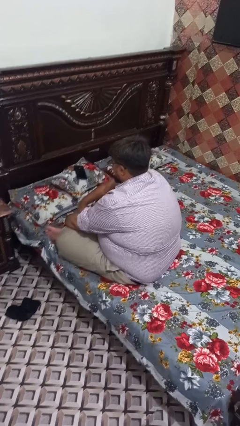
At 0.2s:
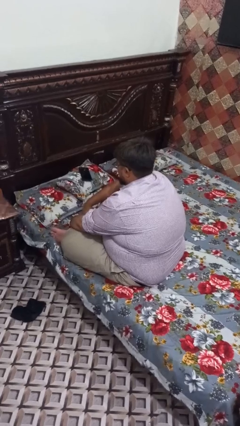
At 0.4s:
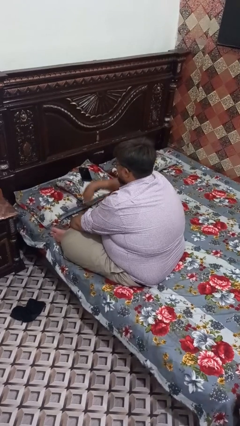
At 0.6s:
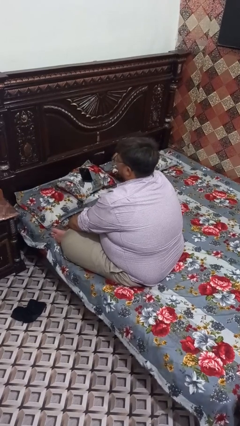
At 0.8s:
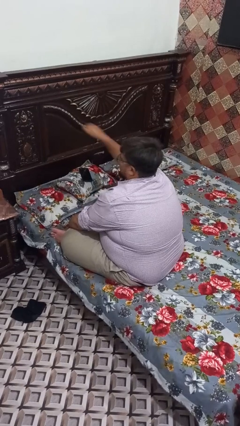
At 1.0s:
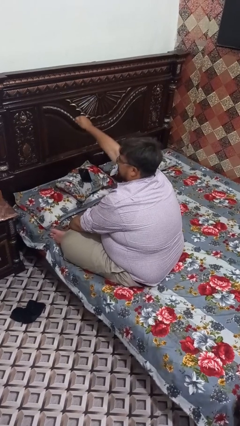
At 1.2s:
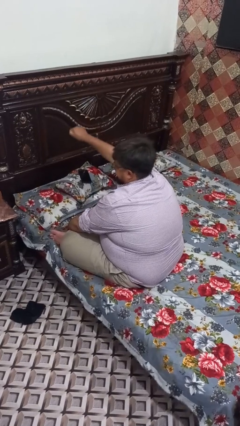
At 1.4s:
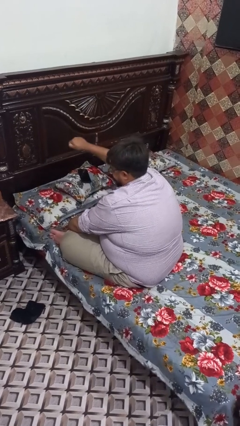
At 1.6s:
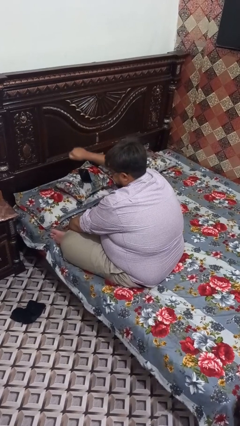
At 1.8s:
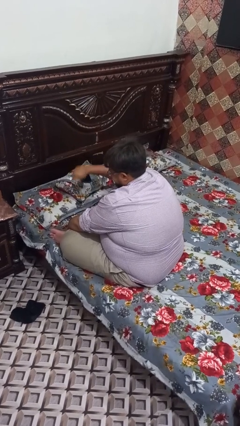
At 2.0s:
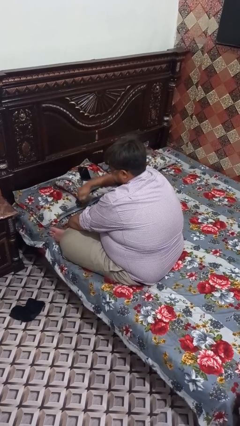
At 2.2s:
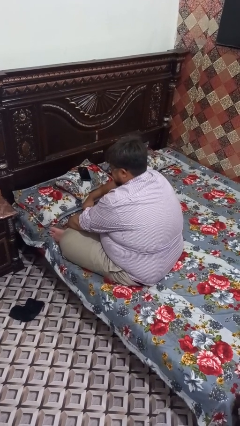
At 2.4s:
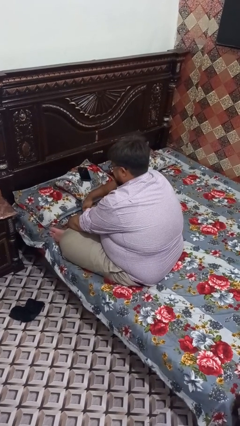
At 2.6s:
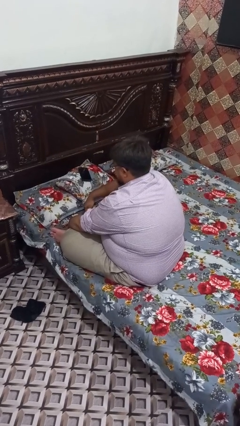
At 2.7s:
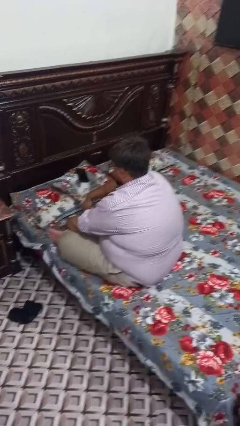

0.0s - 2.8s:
person punches

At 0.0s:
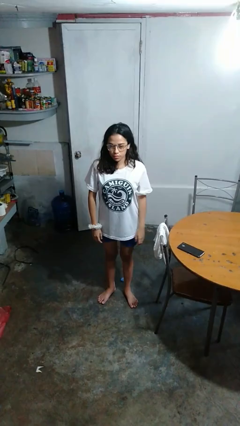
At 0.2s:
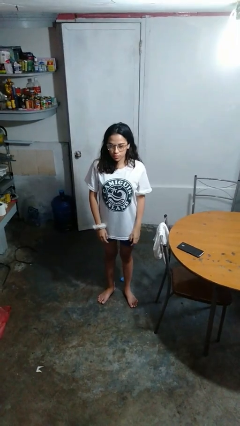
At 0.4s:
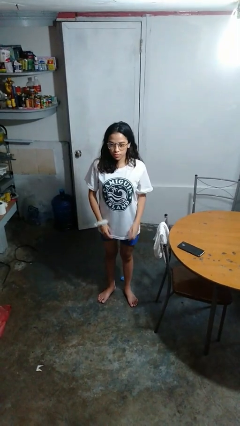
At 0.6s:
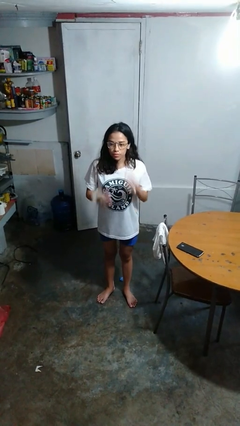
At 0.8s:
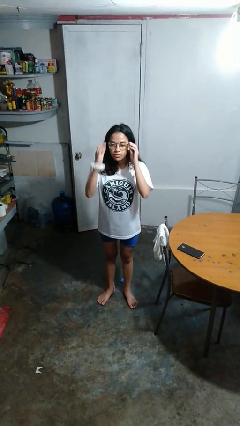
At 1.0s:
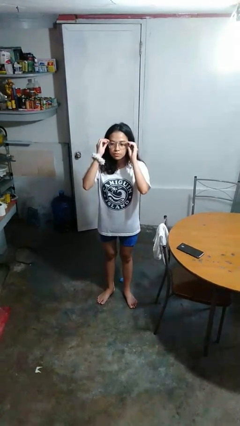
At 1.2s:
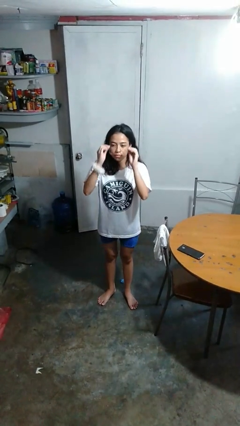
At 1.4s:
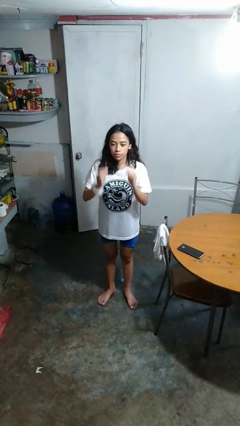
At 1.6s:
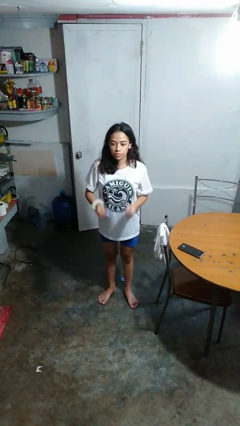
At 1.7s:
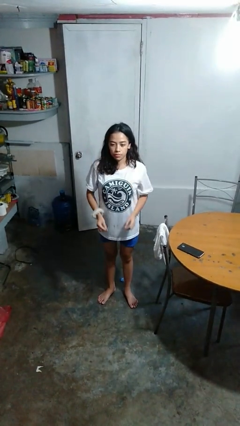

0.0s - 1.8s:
person takes off glasses

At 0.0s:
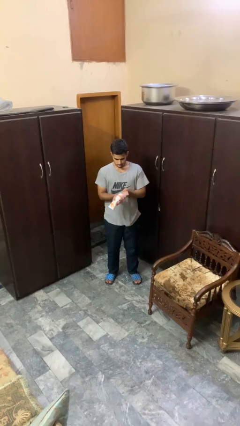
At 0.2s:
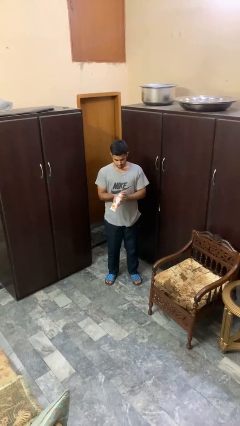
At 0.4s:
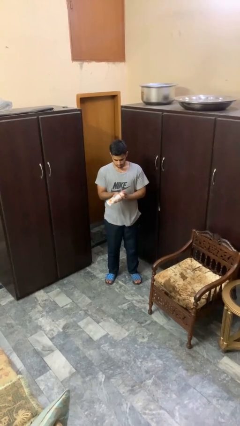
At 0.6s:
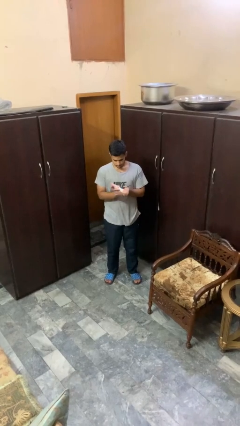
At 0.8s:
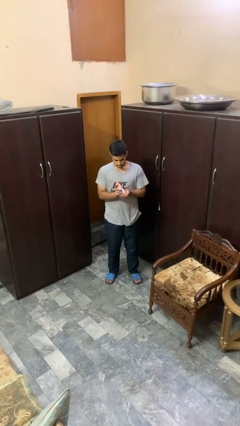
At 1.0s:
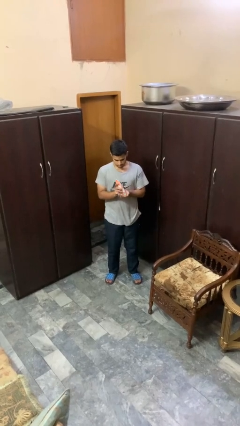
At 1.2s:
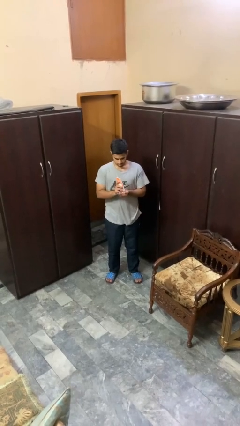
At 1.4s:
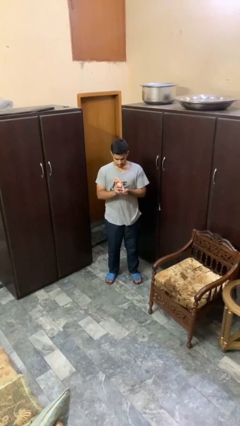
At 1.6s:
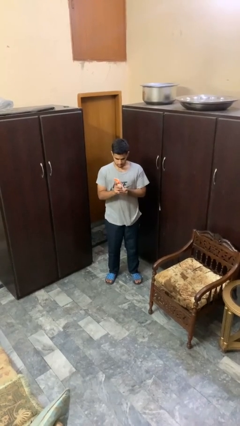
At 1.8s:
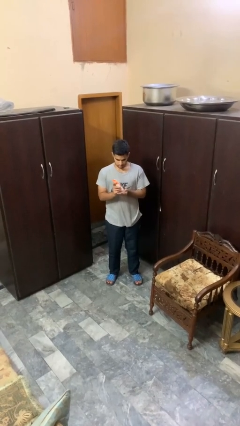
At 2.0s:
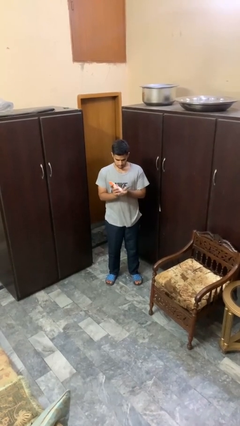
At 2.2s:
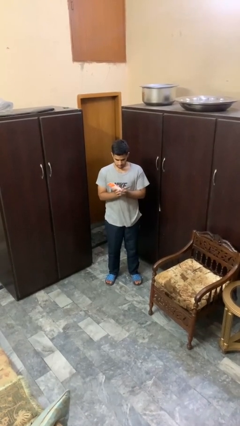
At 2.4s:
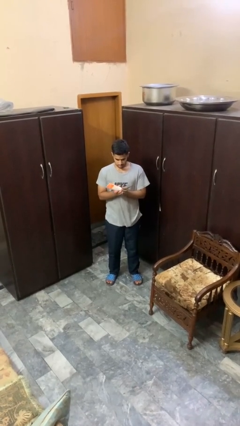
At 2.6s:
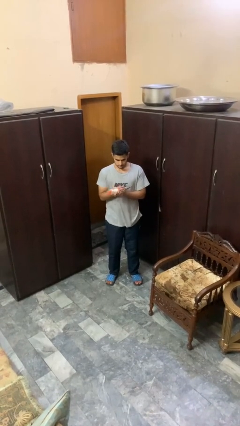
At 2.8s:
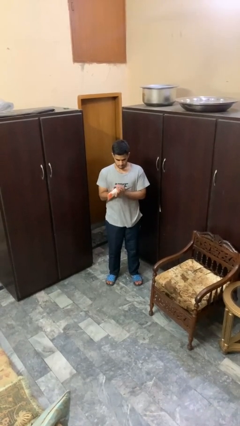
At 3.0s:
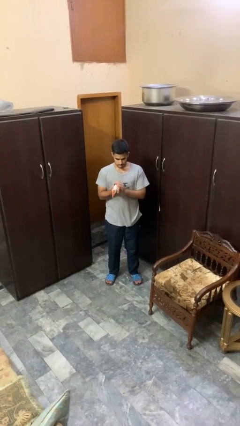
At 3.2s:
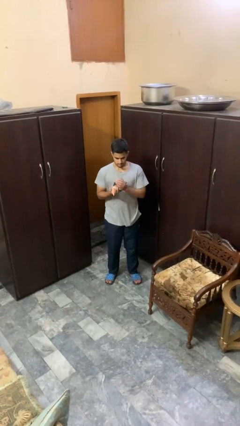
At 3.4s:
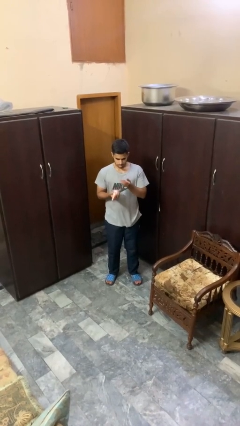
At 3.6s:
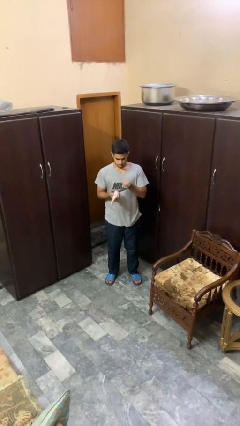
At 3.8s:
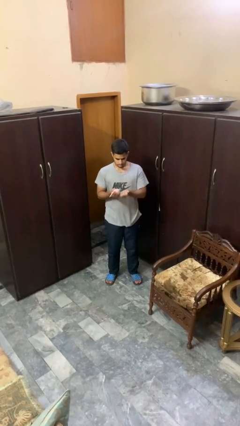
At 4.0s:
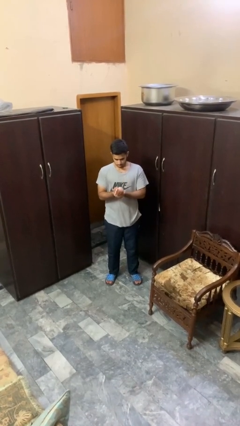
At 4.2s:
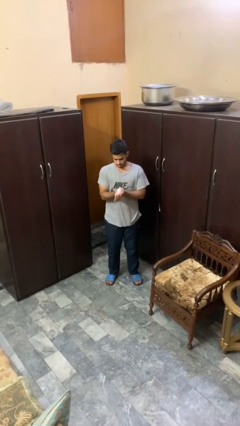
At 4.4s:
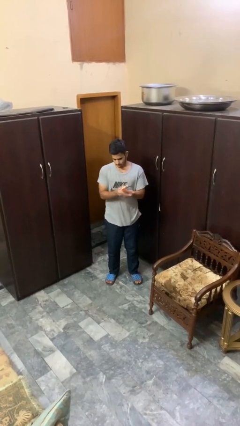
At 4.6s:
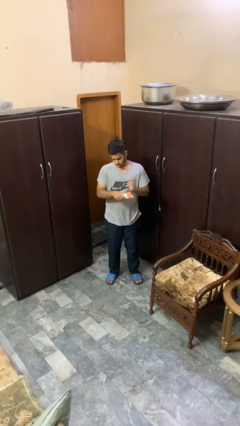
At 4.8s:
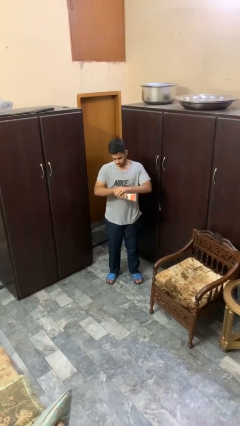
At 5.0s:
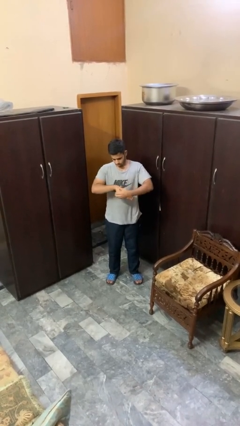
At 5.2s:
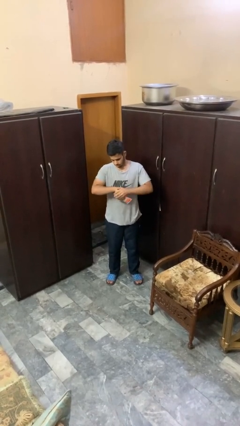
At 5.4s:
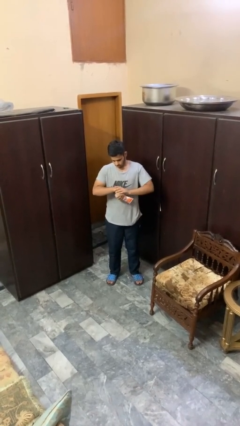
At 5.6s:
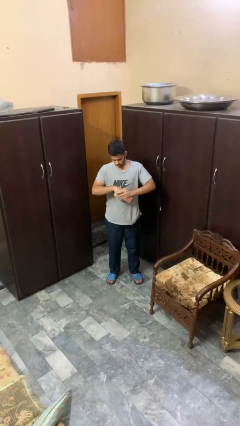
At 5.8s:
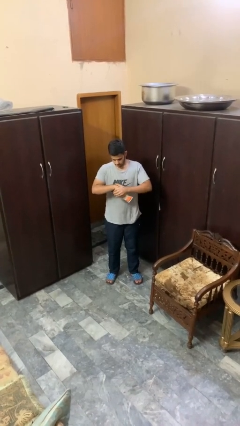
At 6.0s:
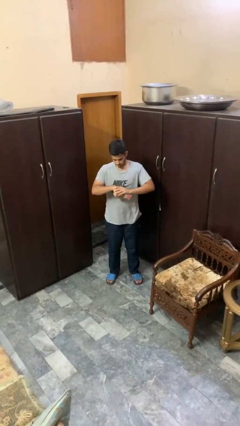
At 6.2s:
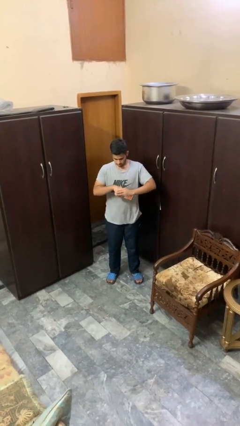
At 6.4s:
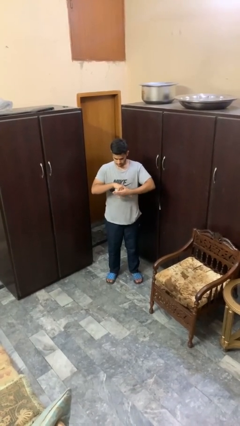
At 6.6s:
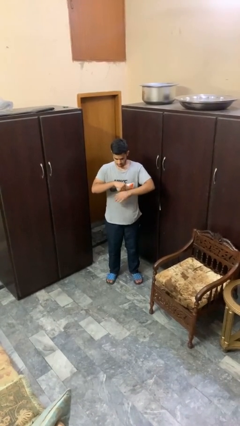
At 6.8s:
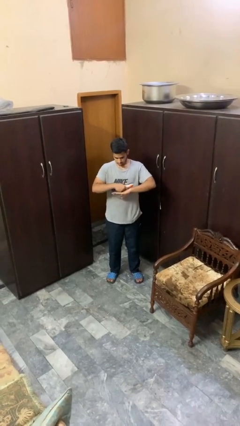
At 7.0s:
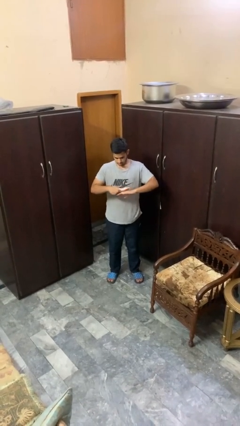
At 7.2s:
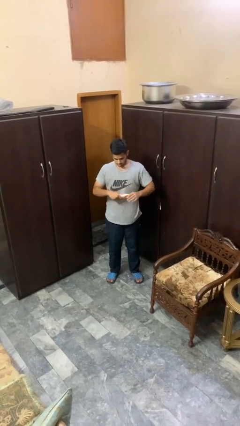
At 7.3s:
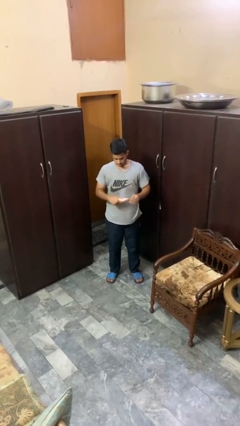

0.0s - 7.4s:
person applies sunscreen

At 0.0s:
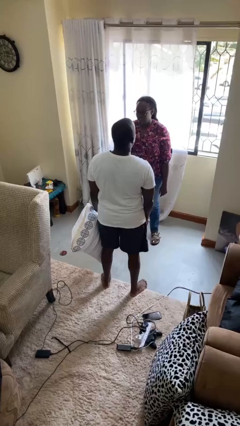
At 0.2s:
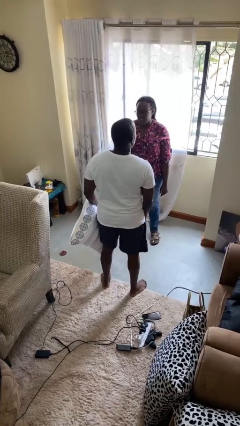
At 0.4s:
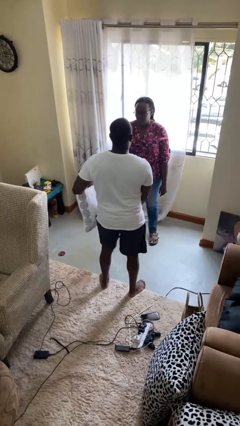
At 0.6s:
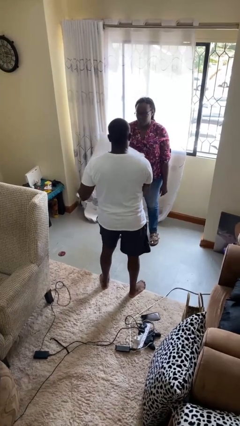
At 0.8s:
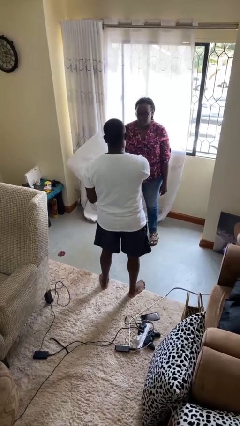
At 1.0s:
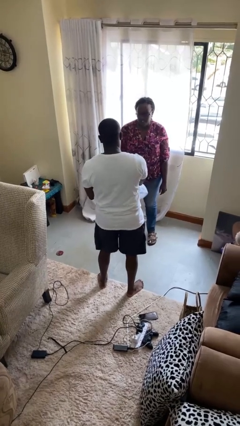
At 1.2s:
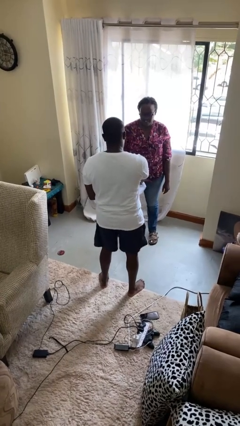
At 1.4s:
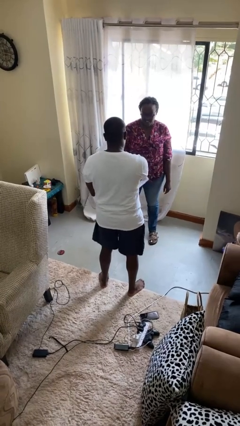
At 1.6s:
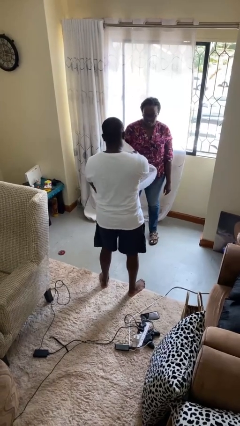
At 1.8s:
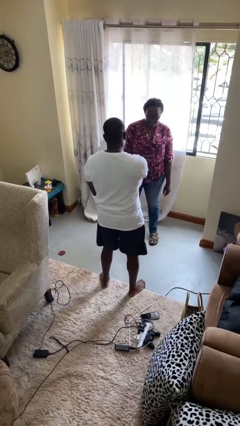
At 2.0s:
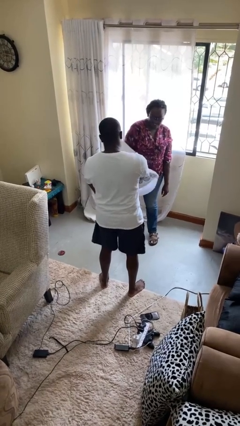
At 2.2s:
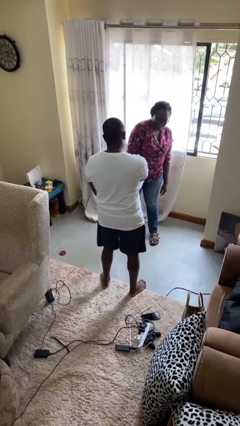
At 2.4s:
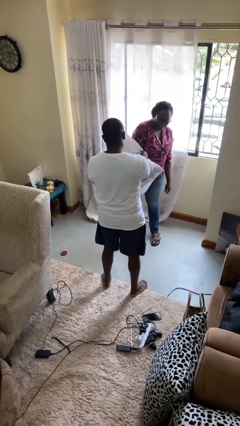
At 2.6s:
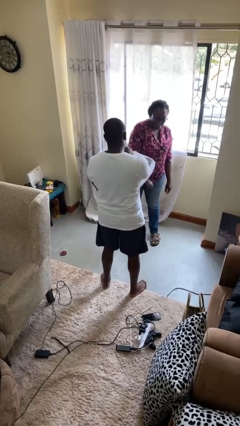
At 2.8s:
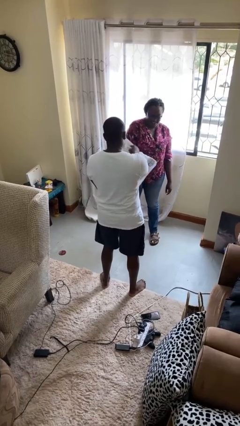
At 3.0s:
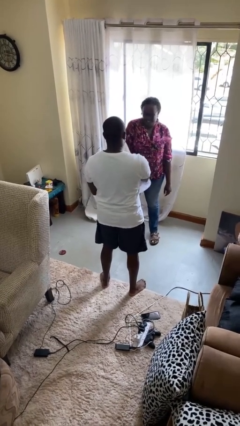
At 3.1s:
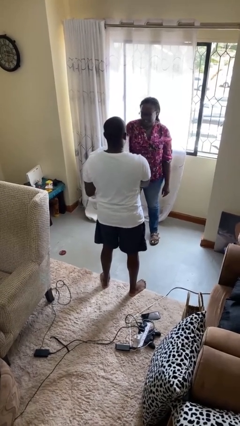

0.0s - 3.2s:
person hits person with pillow

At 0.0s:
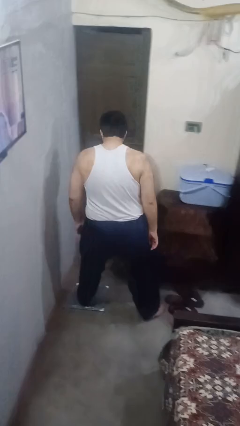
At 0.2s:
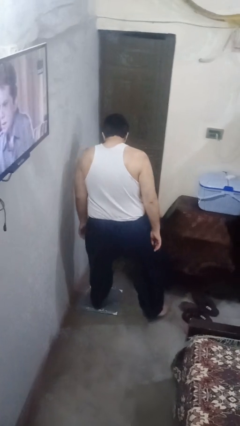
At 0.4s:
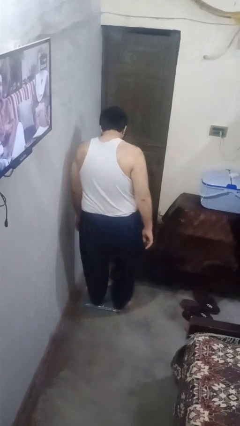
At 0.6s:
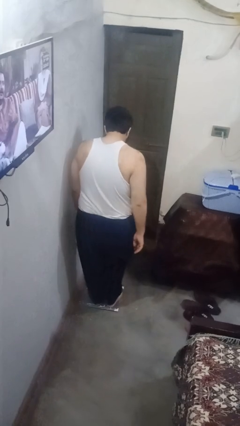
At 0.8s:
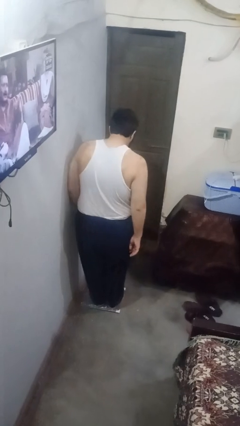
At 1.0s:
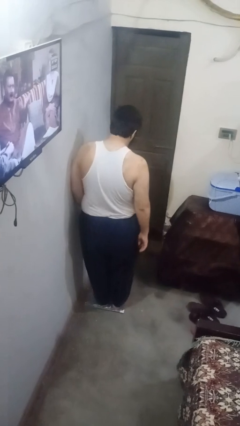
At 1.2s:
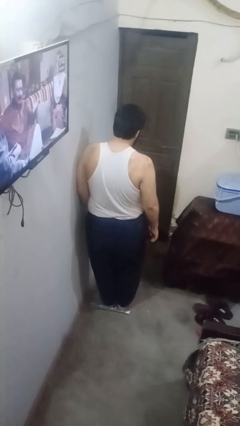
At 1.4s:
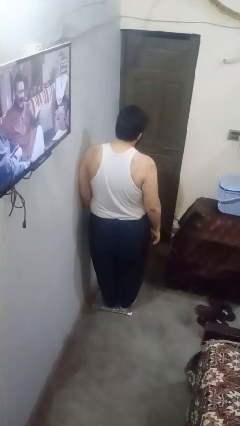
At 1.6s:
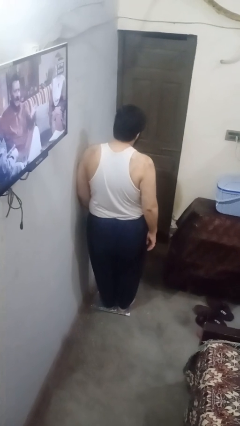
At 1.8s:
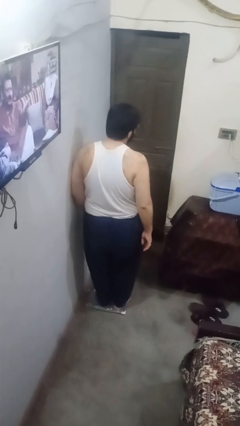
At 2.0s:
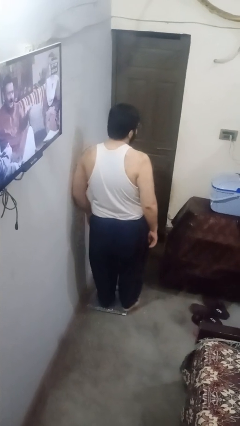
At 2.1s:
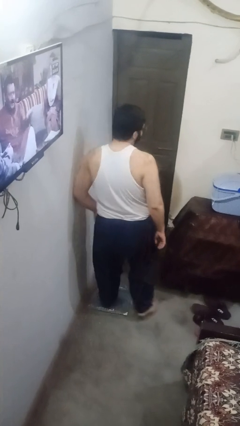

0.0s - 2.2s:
person uses bodyweight scale

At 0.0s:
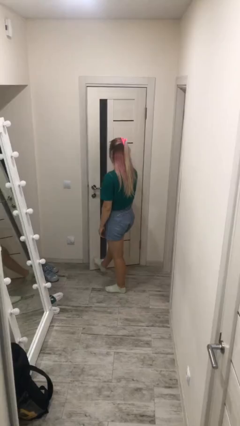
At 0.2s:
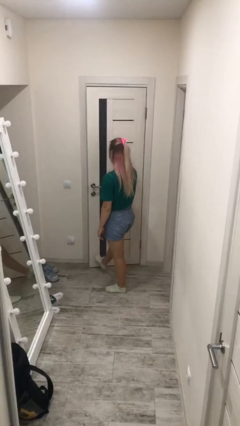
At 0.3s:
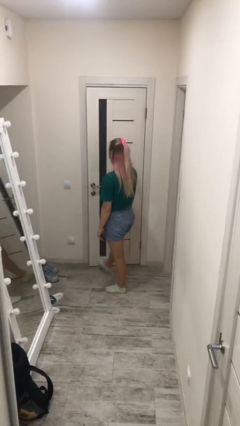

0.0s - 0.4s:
person closes door with foot
